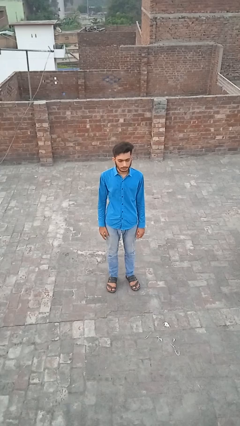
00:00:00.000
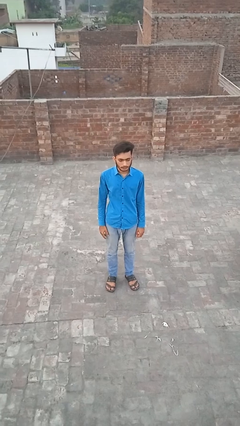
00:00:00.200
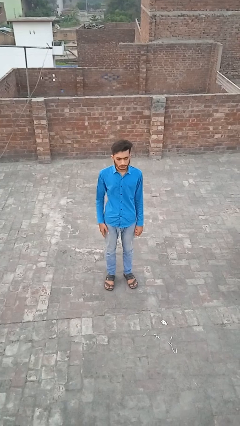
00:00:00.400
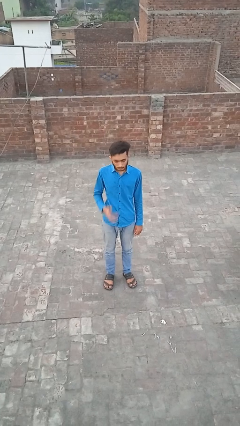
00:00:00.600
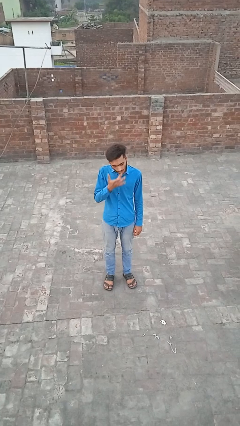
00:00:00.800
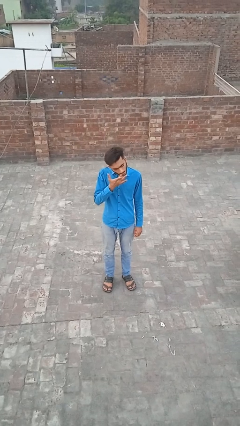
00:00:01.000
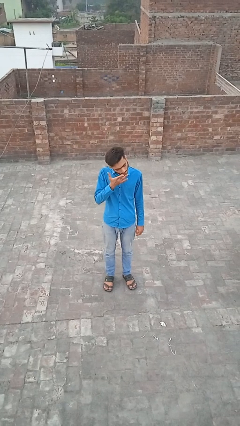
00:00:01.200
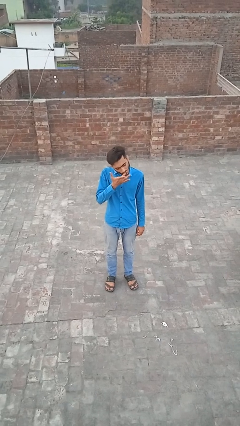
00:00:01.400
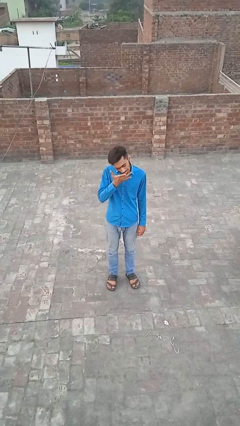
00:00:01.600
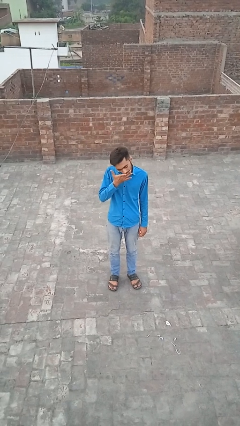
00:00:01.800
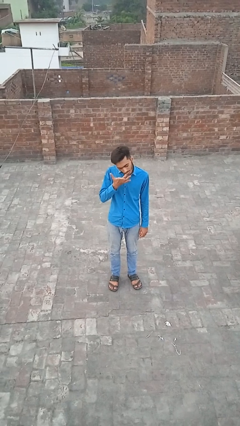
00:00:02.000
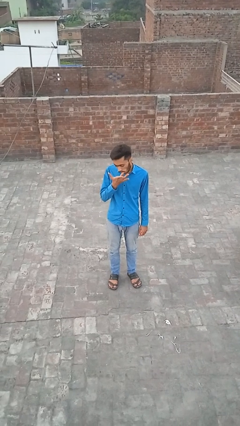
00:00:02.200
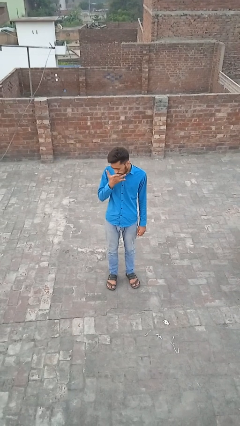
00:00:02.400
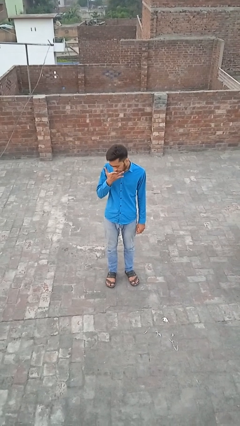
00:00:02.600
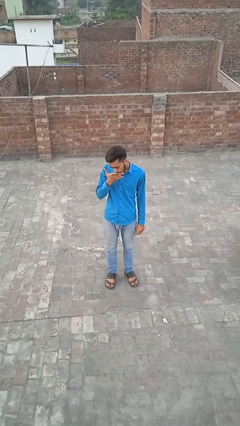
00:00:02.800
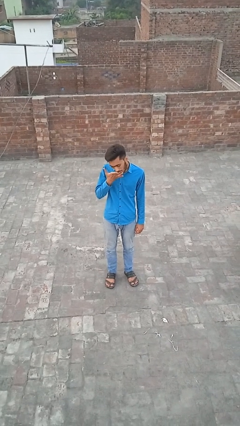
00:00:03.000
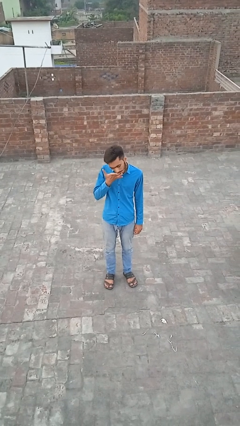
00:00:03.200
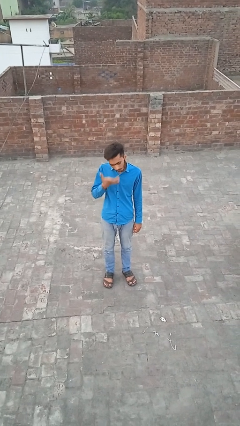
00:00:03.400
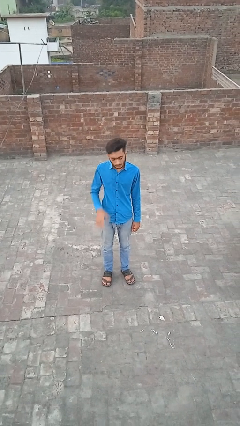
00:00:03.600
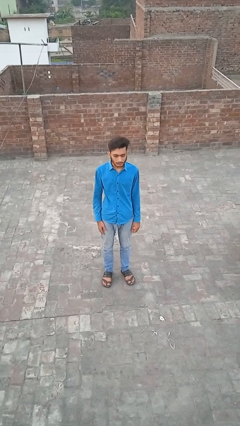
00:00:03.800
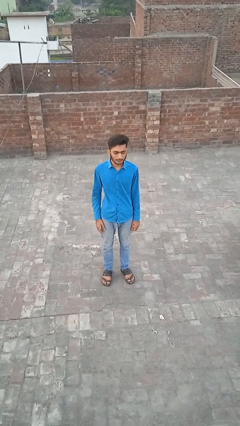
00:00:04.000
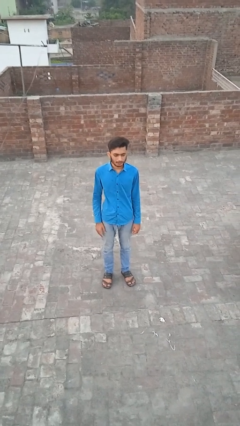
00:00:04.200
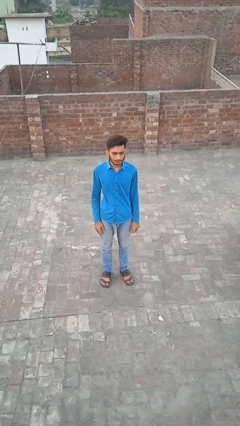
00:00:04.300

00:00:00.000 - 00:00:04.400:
person licks fingers

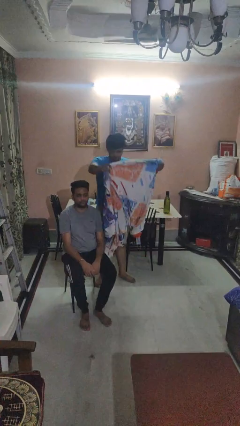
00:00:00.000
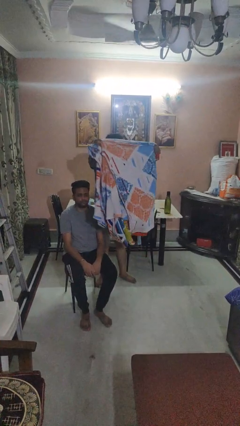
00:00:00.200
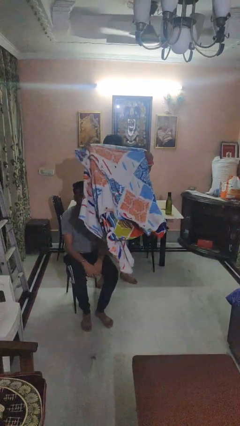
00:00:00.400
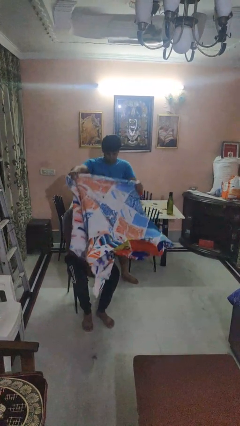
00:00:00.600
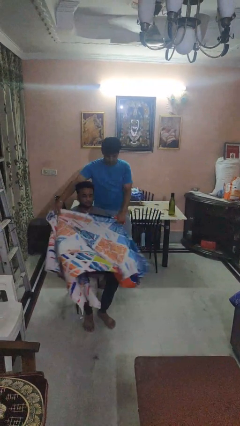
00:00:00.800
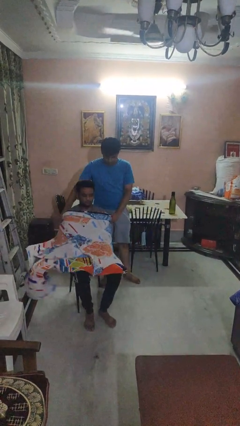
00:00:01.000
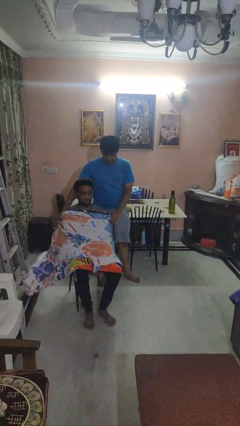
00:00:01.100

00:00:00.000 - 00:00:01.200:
person covers friend with blanket

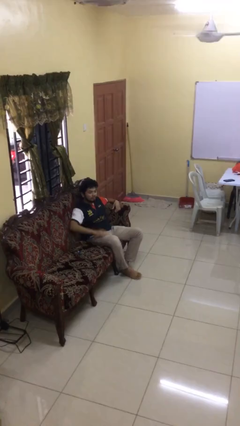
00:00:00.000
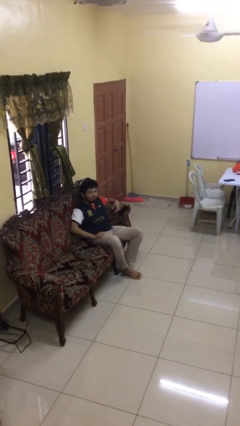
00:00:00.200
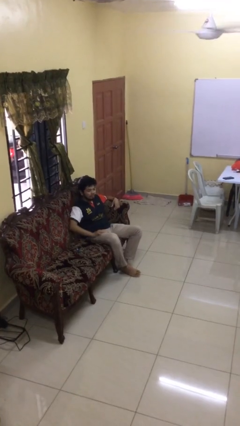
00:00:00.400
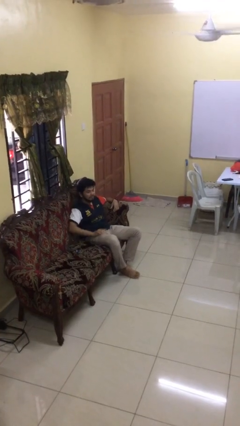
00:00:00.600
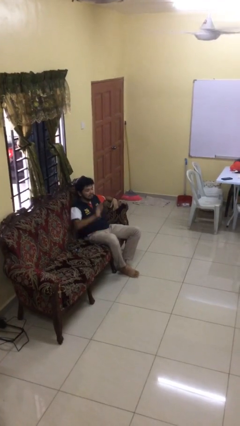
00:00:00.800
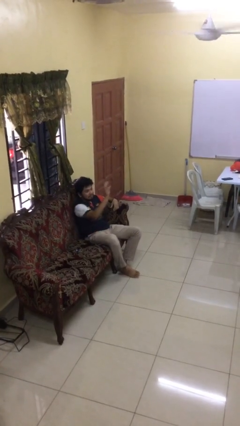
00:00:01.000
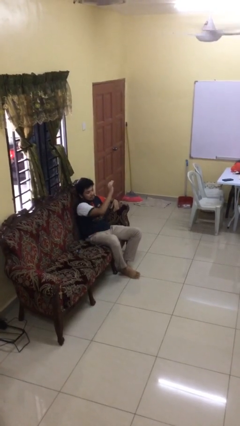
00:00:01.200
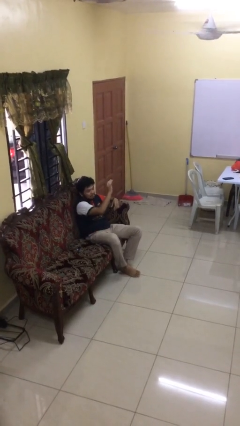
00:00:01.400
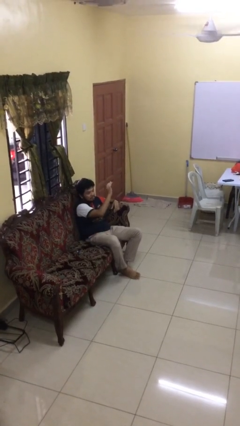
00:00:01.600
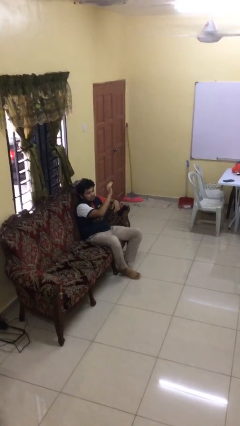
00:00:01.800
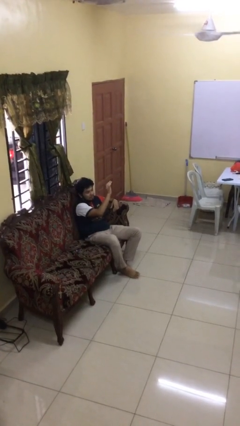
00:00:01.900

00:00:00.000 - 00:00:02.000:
person gestures swipe left

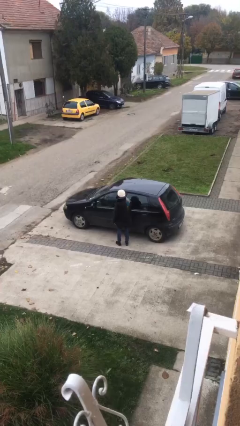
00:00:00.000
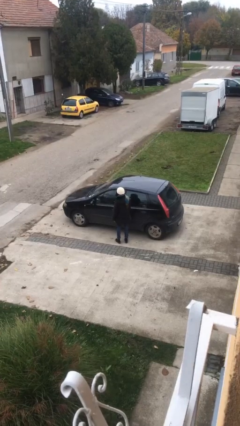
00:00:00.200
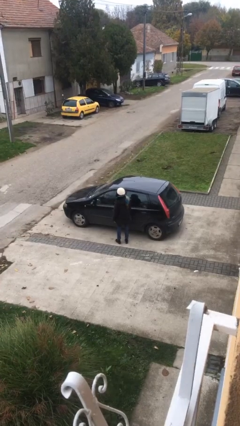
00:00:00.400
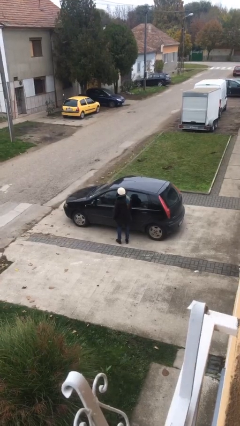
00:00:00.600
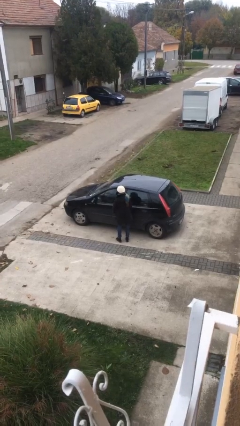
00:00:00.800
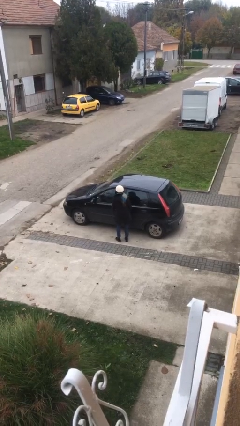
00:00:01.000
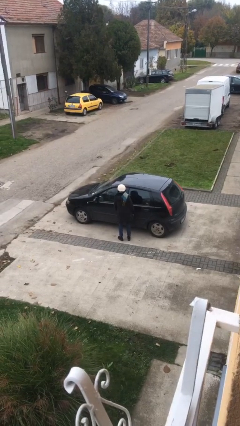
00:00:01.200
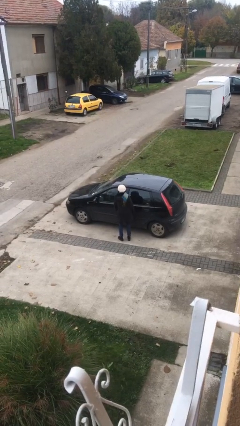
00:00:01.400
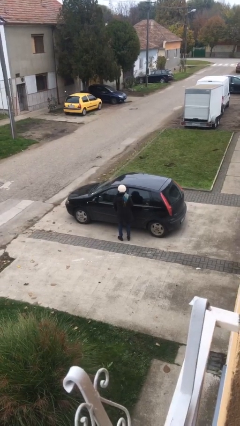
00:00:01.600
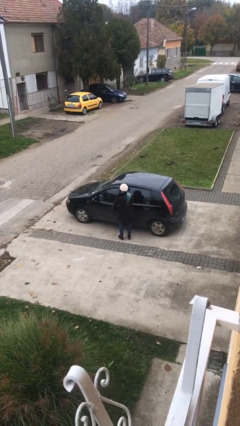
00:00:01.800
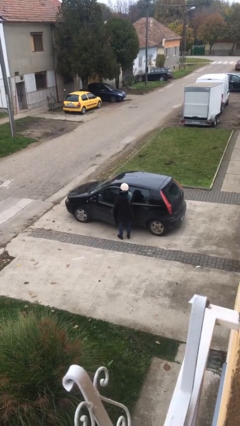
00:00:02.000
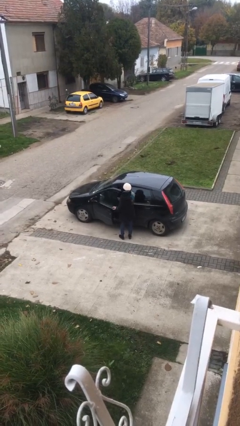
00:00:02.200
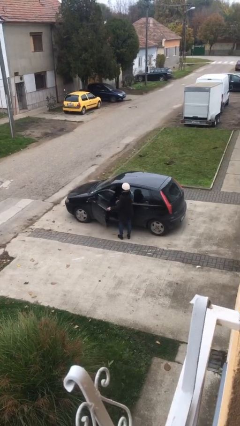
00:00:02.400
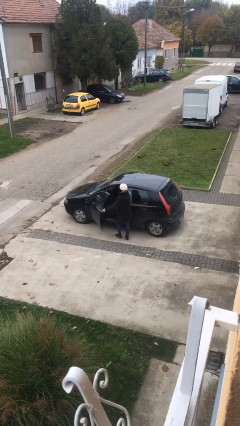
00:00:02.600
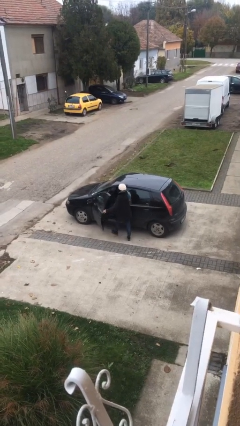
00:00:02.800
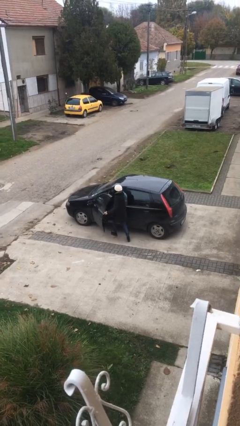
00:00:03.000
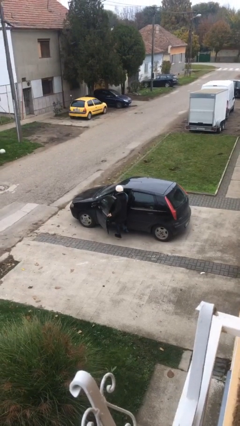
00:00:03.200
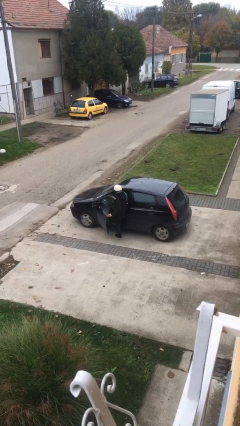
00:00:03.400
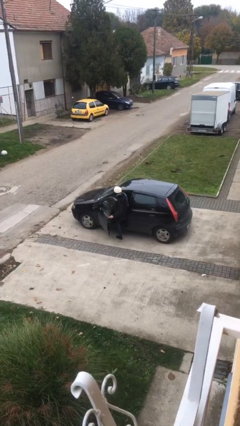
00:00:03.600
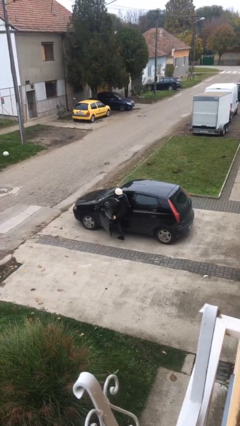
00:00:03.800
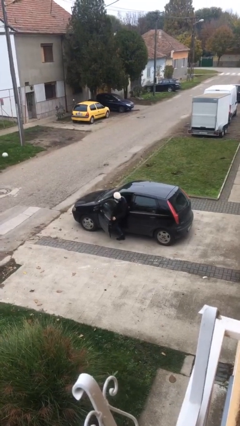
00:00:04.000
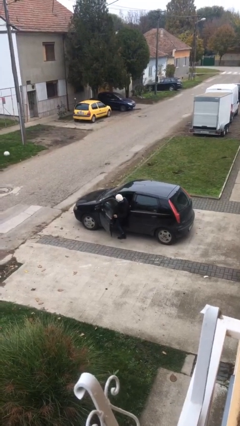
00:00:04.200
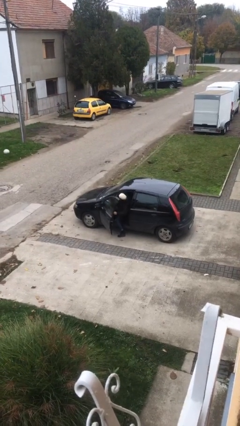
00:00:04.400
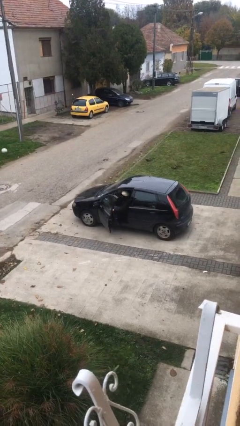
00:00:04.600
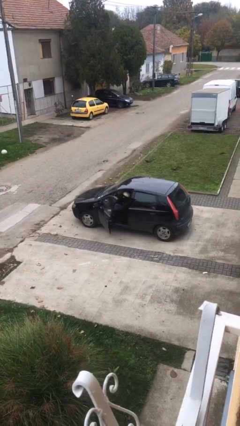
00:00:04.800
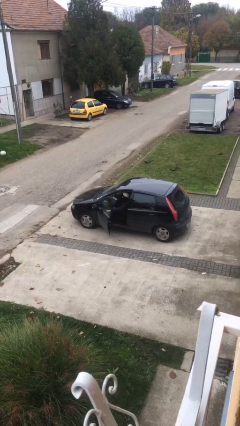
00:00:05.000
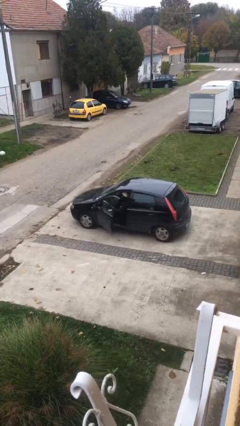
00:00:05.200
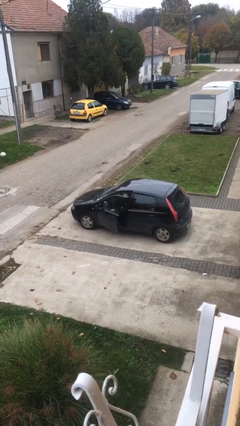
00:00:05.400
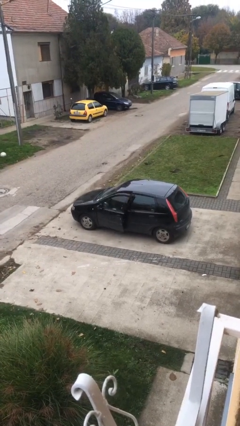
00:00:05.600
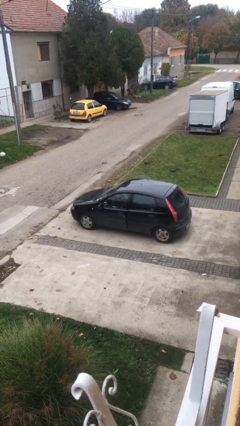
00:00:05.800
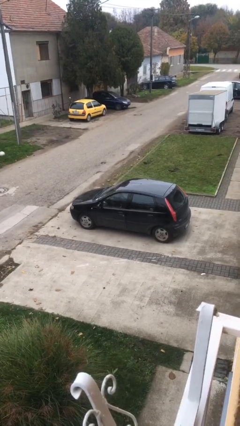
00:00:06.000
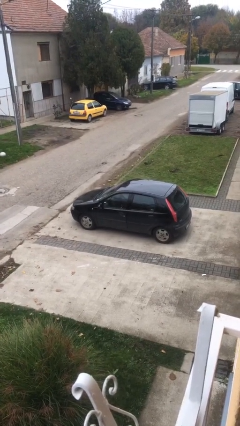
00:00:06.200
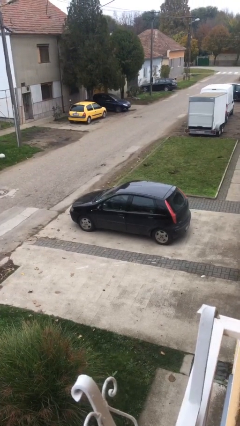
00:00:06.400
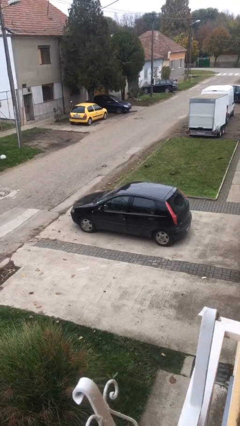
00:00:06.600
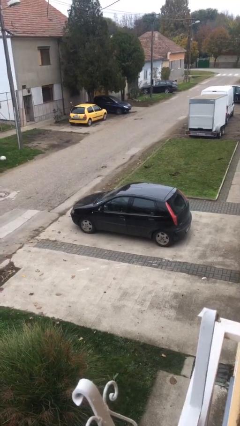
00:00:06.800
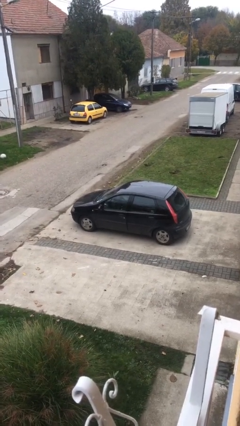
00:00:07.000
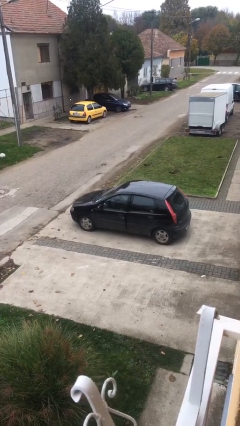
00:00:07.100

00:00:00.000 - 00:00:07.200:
person enters car

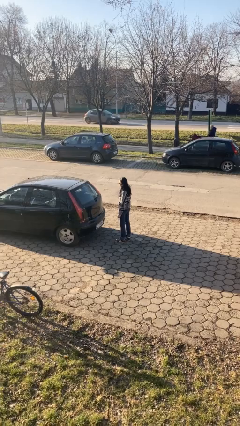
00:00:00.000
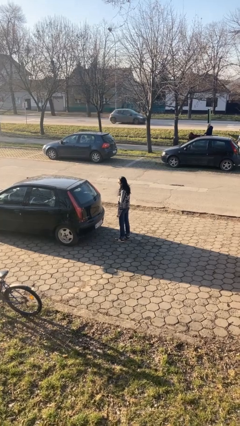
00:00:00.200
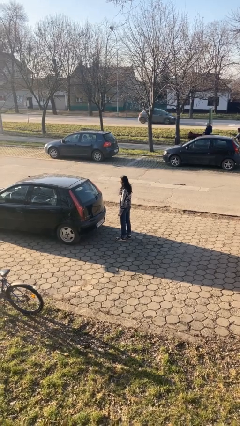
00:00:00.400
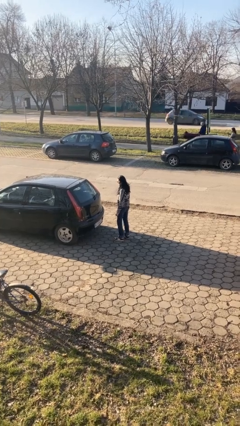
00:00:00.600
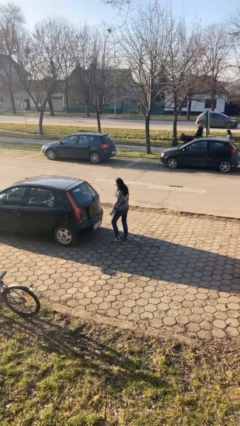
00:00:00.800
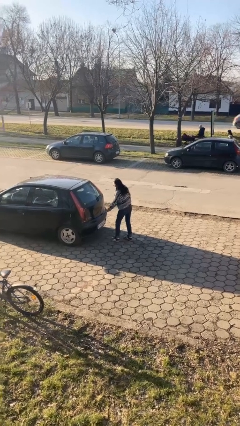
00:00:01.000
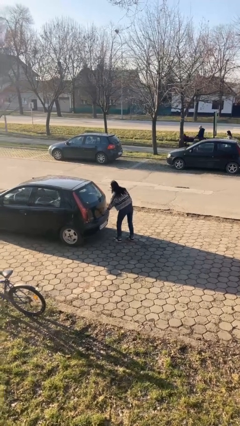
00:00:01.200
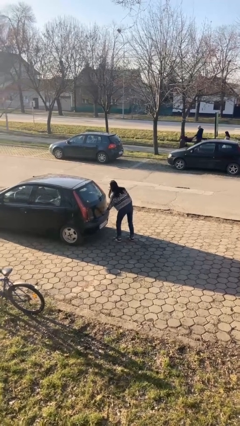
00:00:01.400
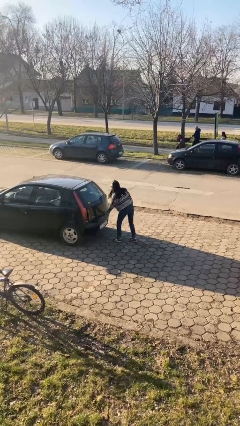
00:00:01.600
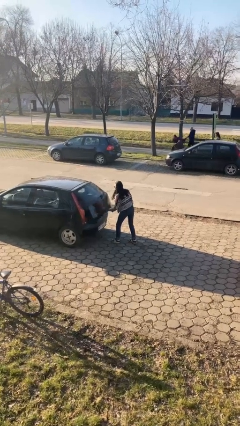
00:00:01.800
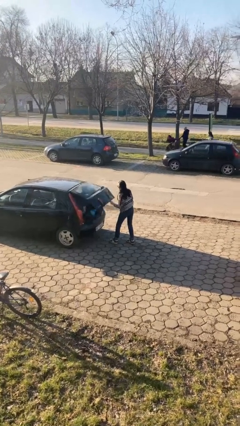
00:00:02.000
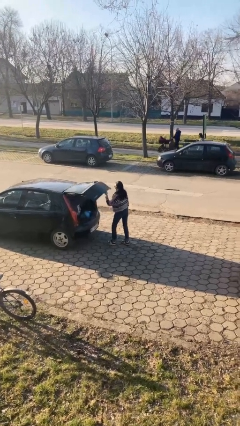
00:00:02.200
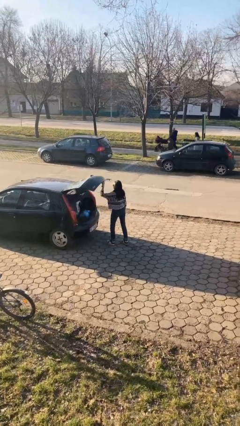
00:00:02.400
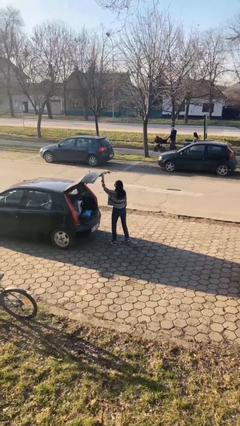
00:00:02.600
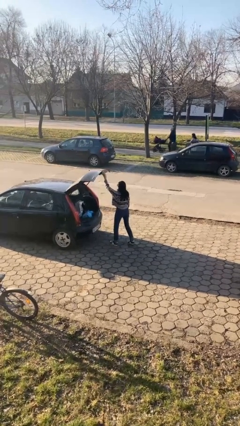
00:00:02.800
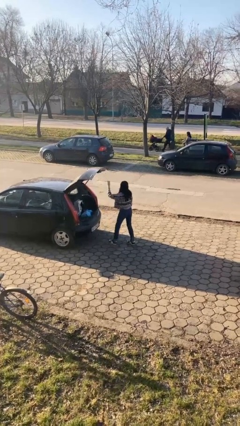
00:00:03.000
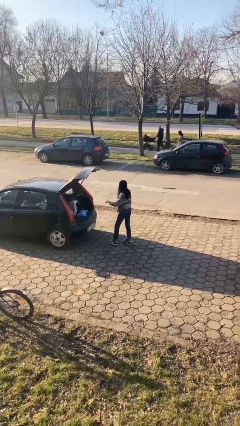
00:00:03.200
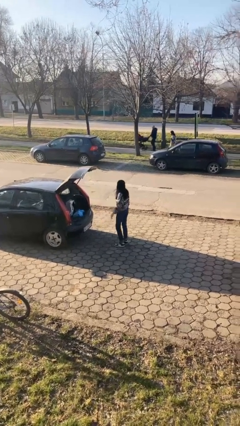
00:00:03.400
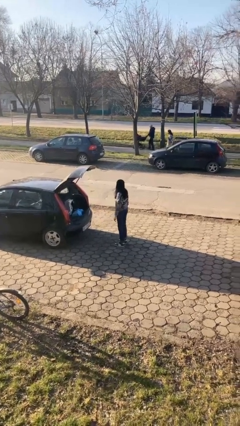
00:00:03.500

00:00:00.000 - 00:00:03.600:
person opens car trunk
